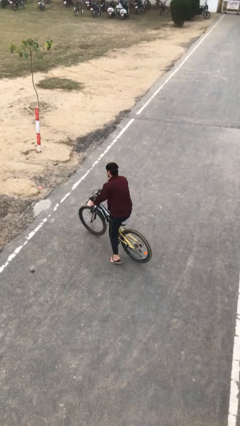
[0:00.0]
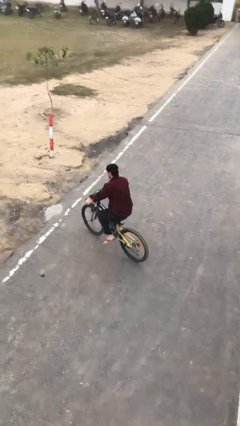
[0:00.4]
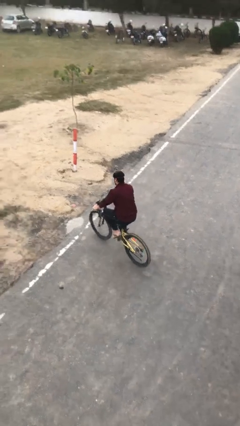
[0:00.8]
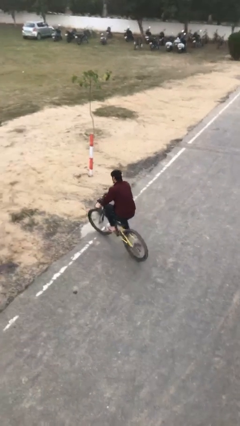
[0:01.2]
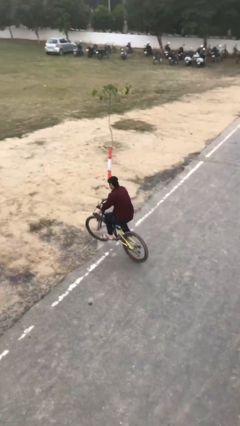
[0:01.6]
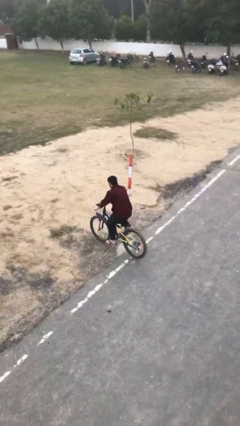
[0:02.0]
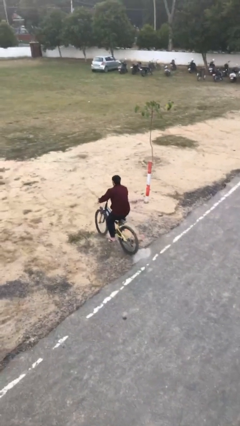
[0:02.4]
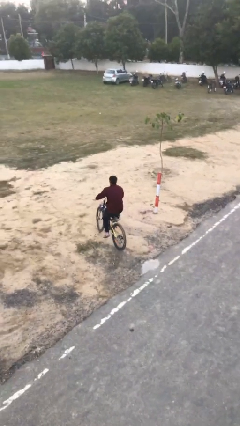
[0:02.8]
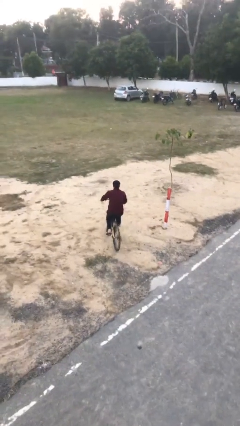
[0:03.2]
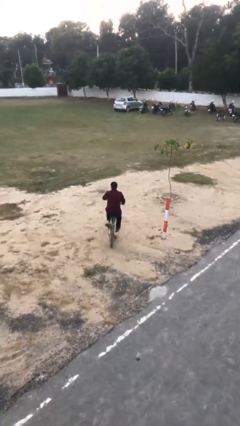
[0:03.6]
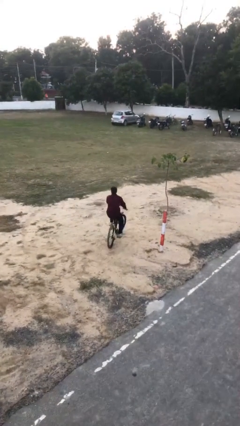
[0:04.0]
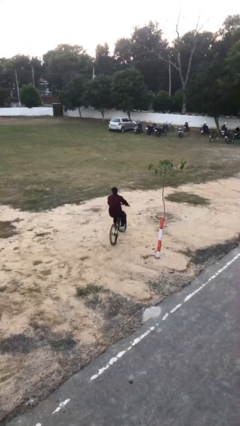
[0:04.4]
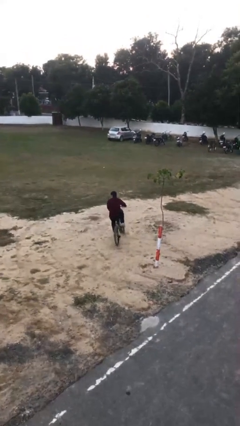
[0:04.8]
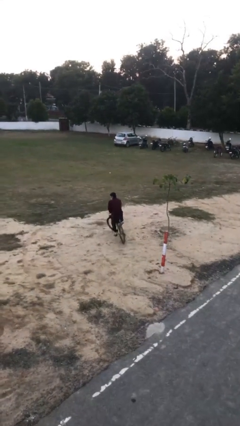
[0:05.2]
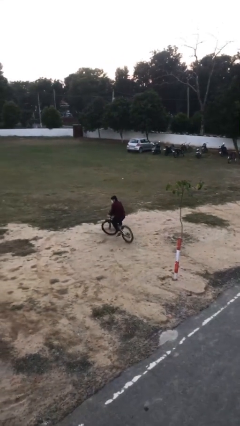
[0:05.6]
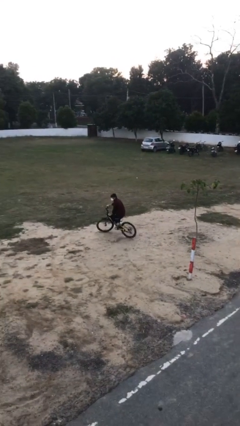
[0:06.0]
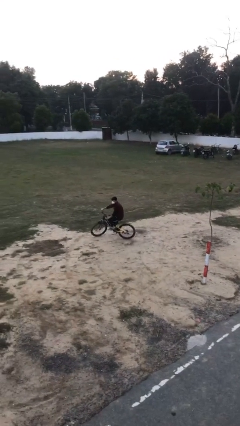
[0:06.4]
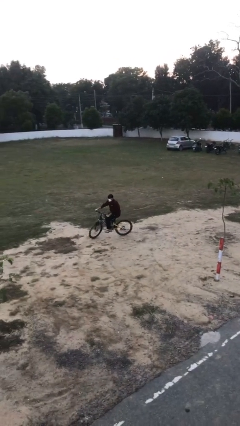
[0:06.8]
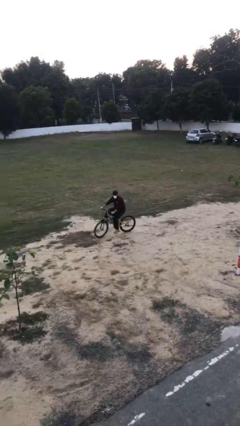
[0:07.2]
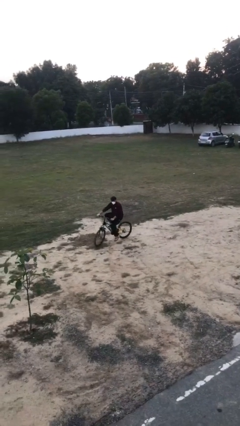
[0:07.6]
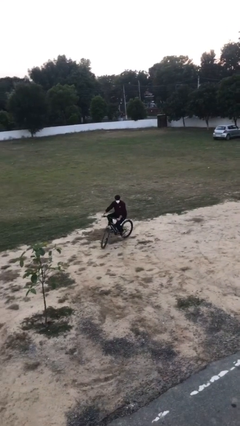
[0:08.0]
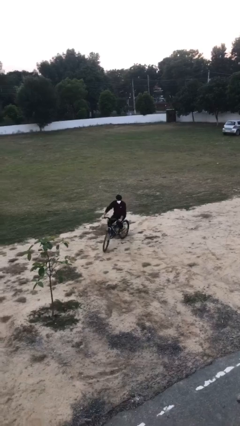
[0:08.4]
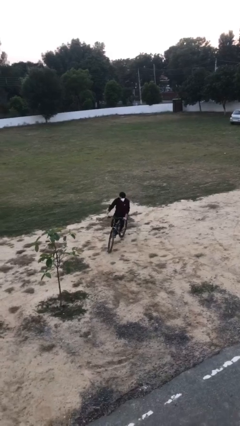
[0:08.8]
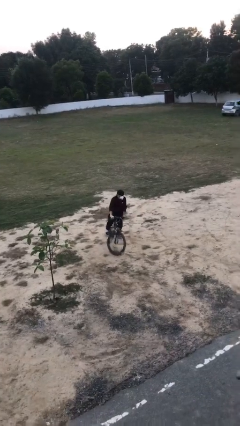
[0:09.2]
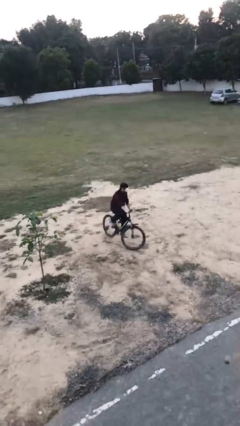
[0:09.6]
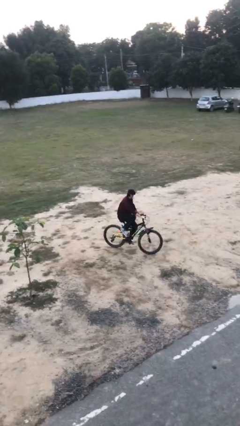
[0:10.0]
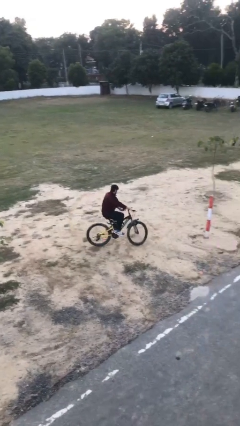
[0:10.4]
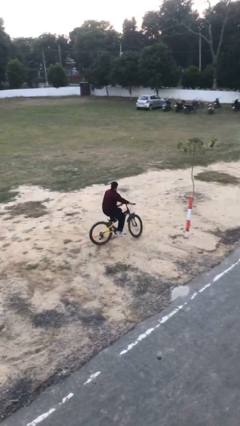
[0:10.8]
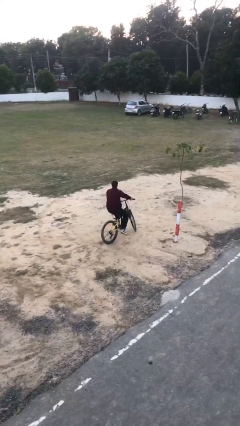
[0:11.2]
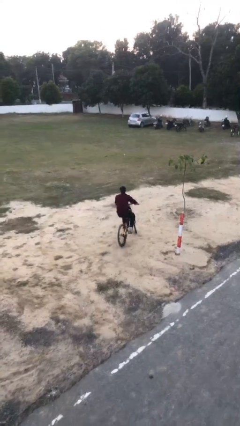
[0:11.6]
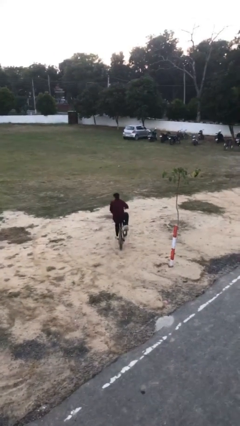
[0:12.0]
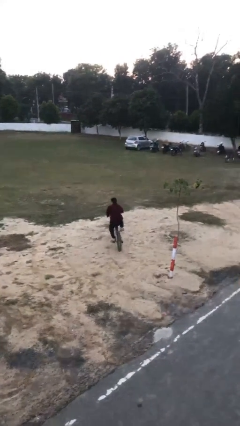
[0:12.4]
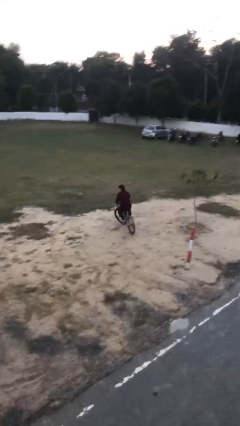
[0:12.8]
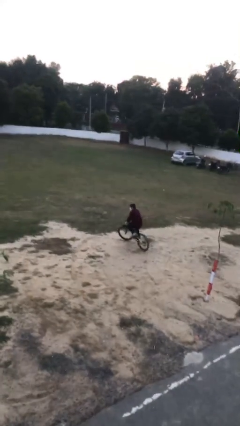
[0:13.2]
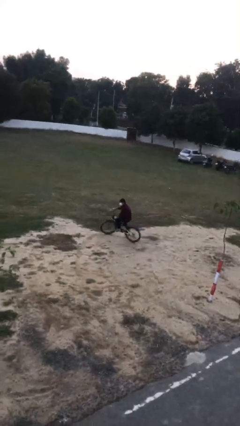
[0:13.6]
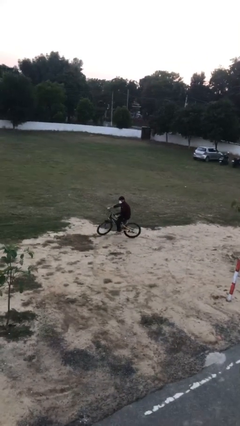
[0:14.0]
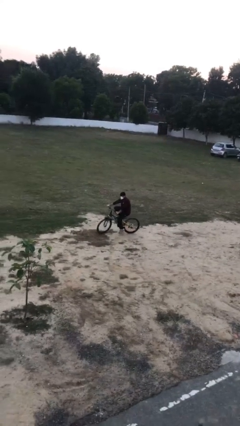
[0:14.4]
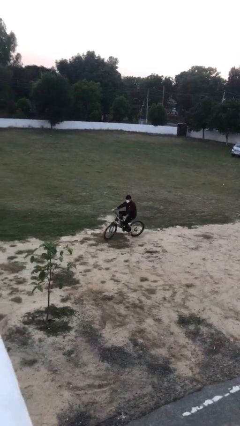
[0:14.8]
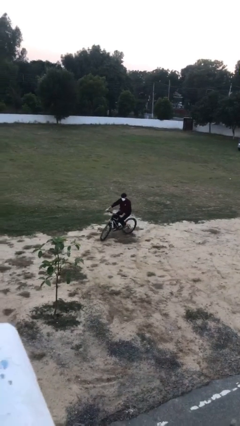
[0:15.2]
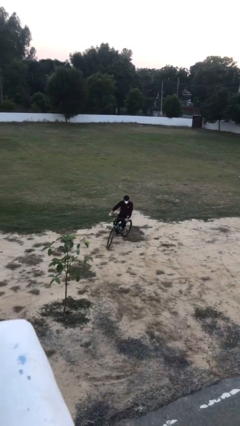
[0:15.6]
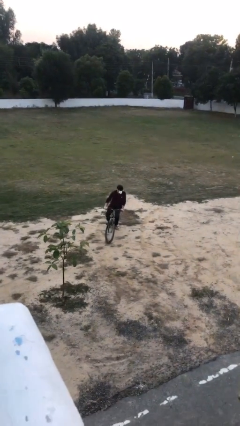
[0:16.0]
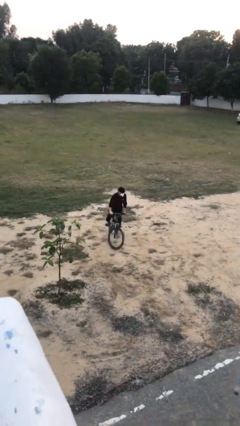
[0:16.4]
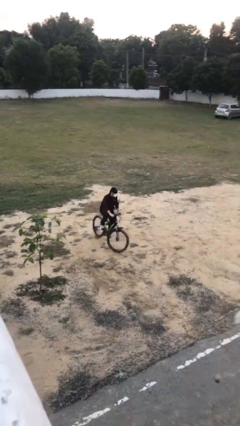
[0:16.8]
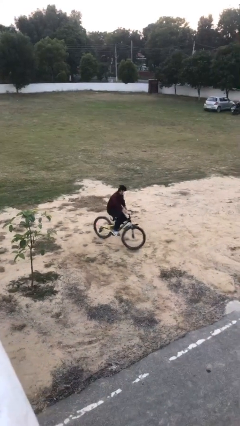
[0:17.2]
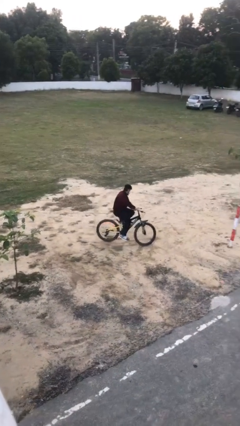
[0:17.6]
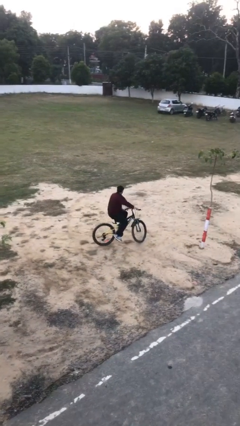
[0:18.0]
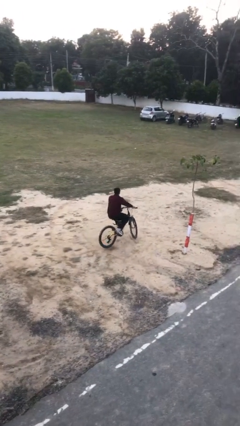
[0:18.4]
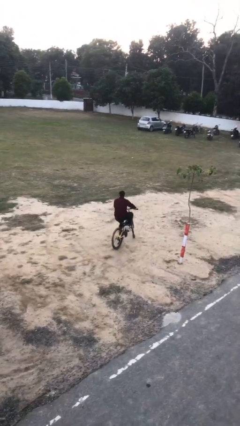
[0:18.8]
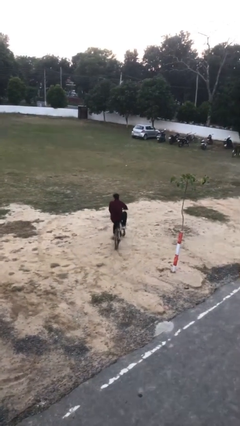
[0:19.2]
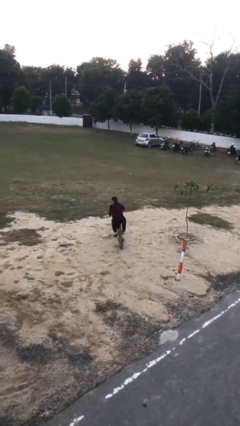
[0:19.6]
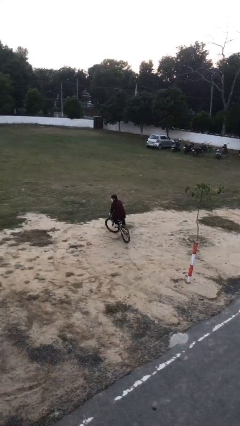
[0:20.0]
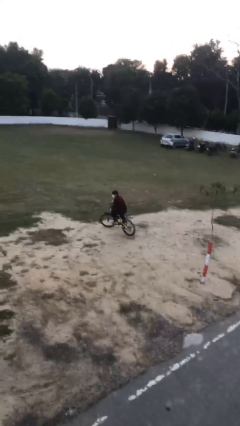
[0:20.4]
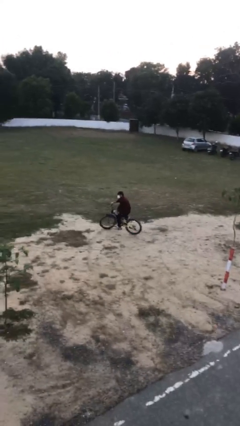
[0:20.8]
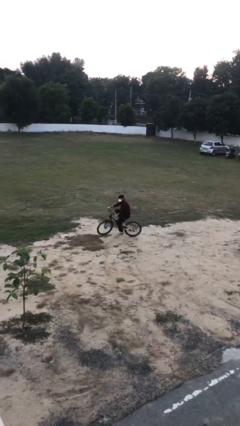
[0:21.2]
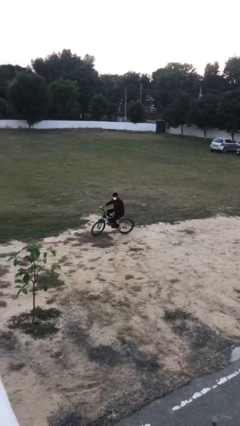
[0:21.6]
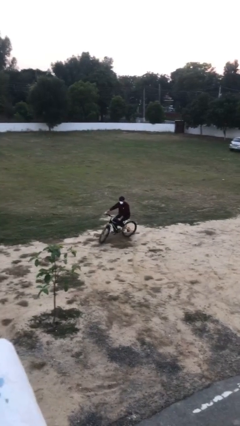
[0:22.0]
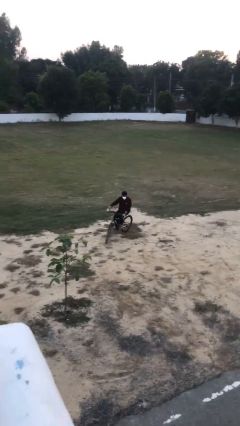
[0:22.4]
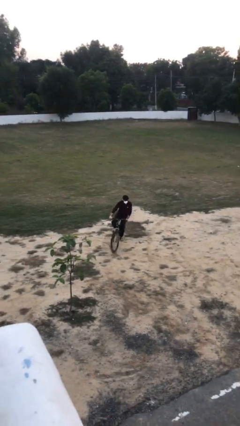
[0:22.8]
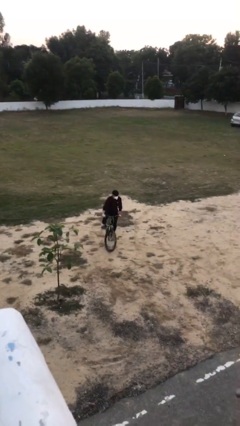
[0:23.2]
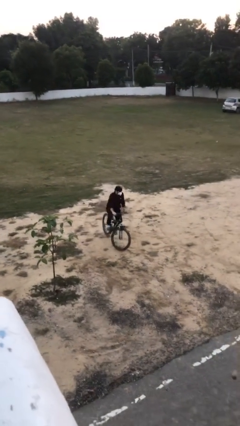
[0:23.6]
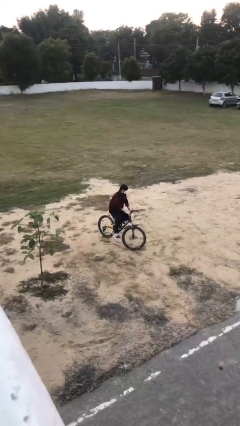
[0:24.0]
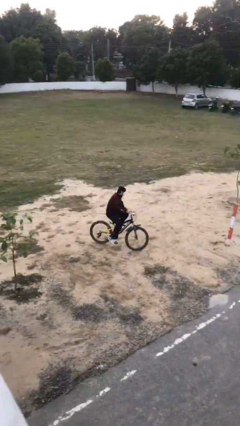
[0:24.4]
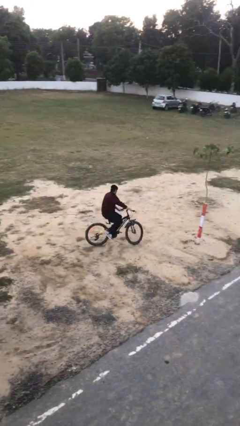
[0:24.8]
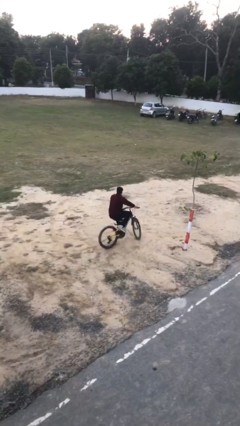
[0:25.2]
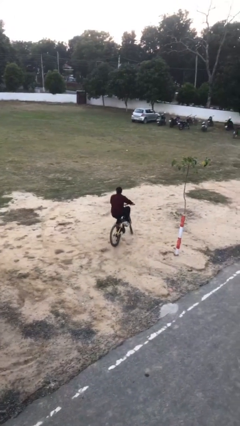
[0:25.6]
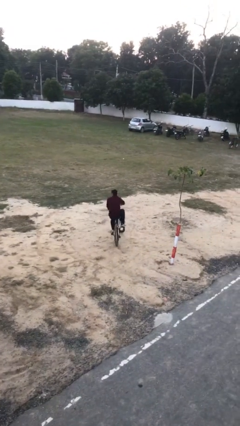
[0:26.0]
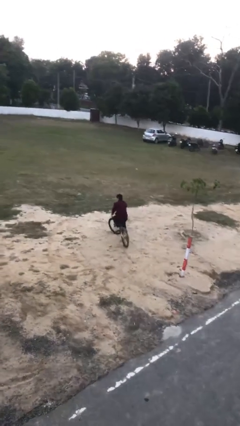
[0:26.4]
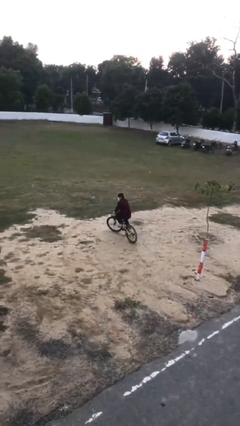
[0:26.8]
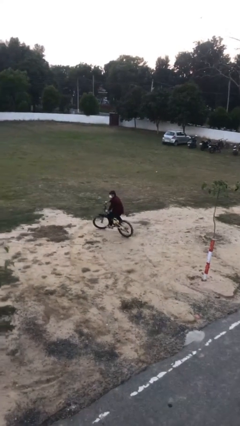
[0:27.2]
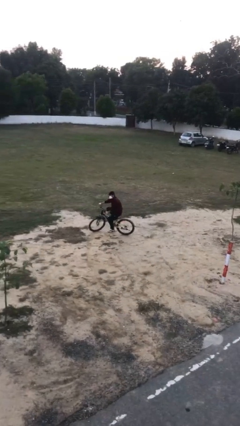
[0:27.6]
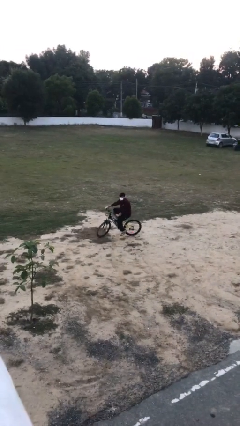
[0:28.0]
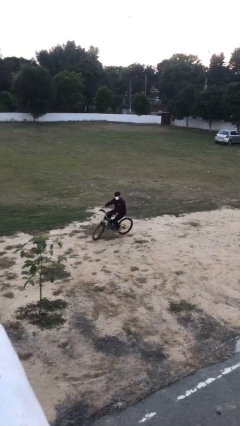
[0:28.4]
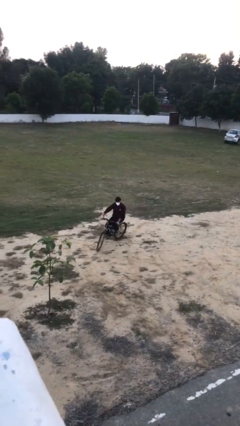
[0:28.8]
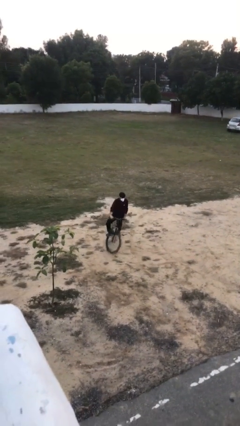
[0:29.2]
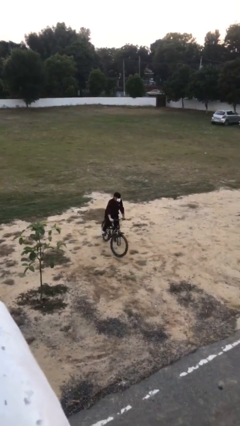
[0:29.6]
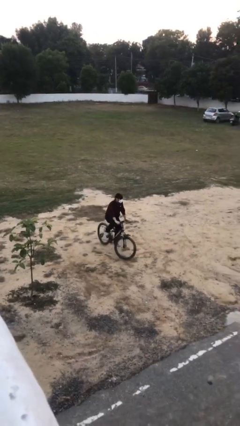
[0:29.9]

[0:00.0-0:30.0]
person rides bicycle

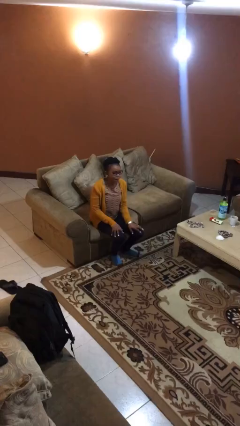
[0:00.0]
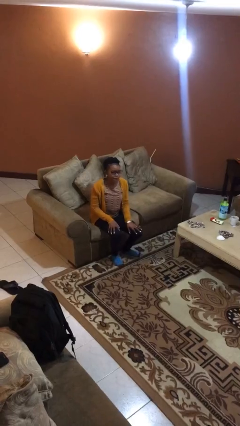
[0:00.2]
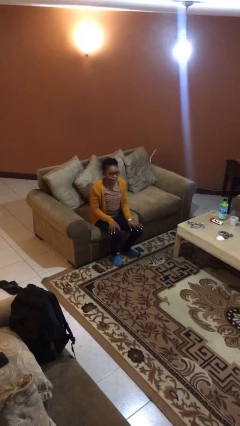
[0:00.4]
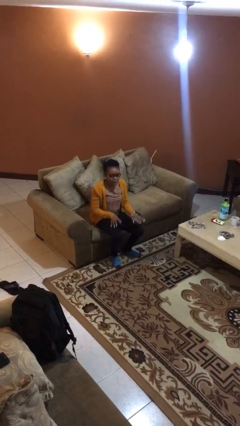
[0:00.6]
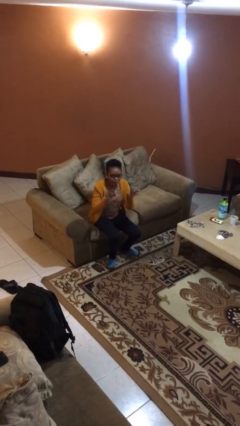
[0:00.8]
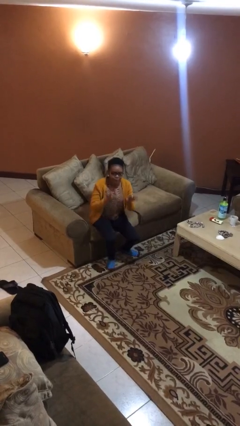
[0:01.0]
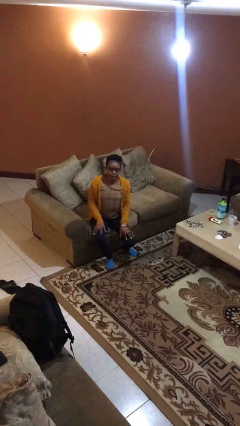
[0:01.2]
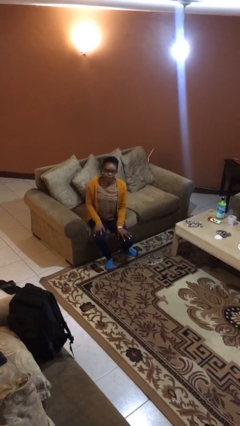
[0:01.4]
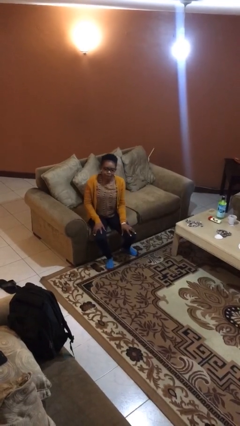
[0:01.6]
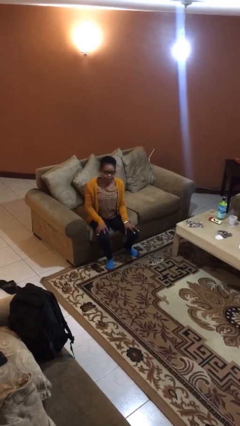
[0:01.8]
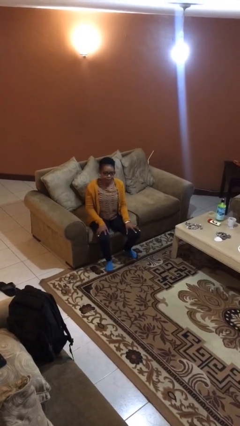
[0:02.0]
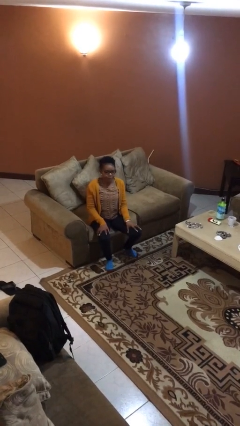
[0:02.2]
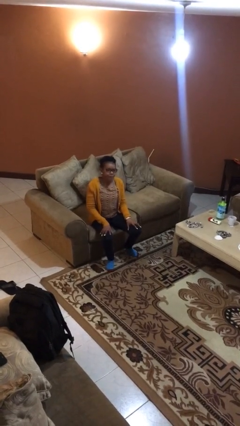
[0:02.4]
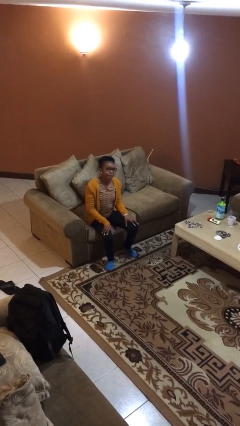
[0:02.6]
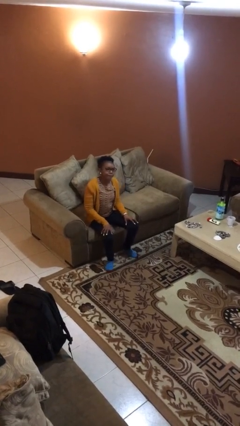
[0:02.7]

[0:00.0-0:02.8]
person slaps hands on thighs

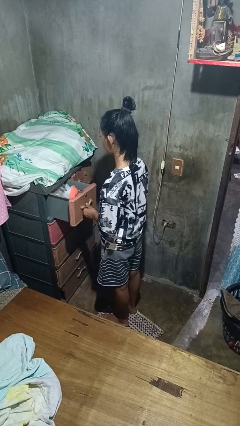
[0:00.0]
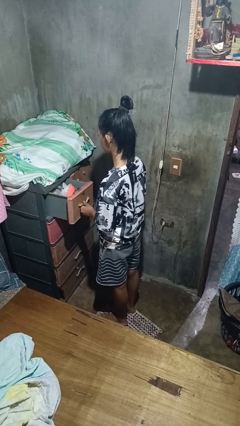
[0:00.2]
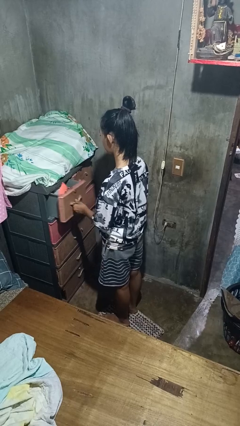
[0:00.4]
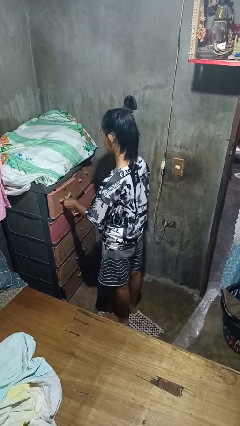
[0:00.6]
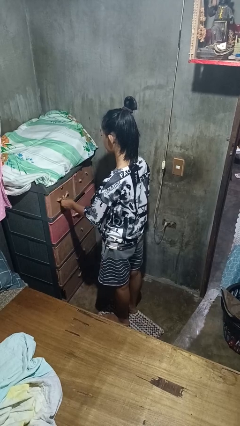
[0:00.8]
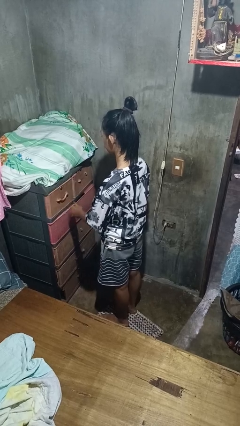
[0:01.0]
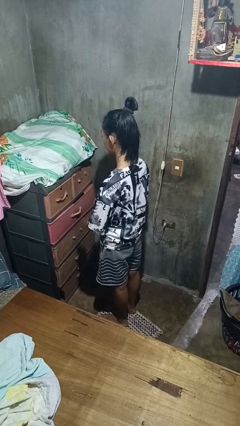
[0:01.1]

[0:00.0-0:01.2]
person closes dresser drawer
